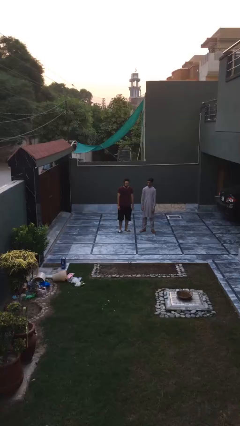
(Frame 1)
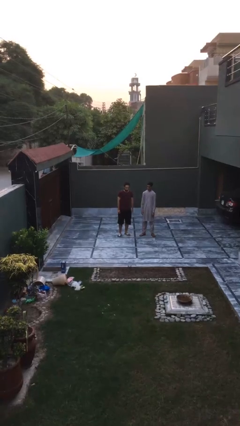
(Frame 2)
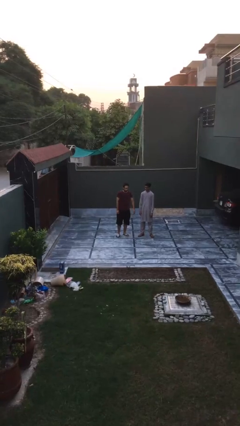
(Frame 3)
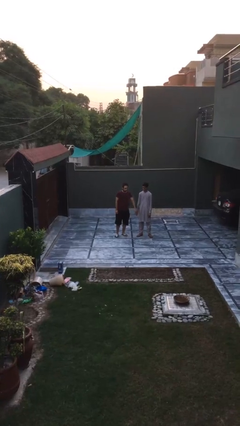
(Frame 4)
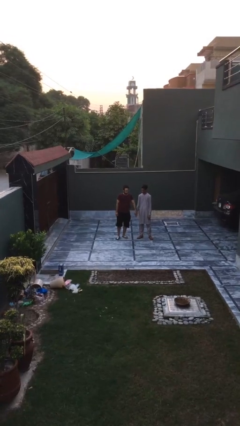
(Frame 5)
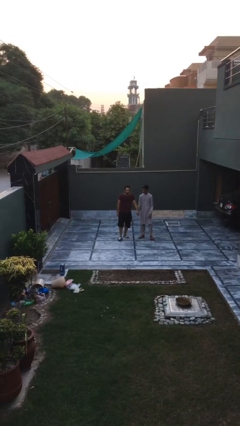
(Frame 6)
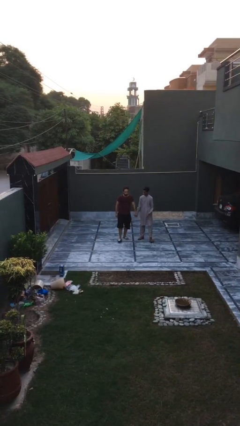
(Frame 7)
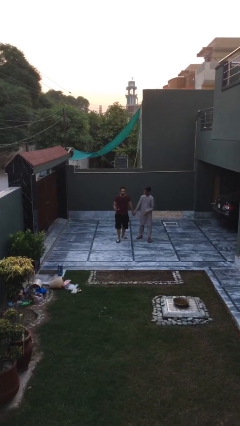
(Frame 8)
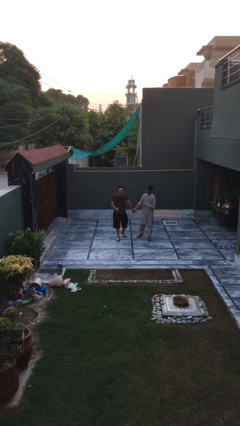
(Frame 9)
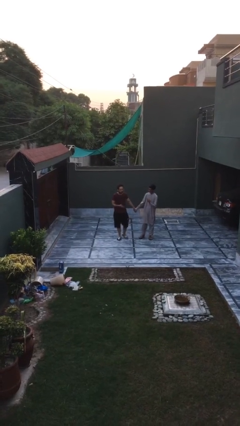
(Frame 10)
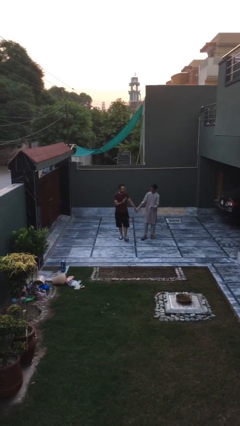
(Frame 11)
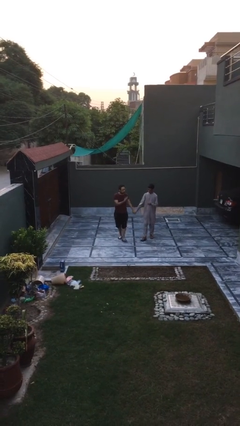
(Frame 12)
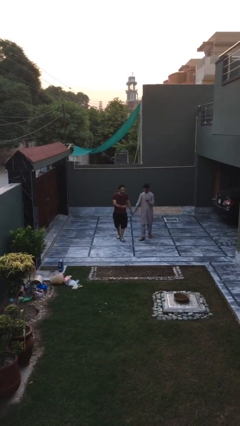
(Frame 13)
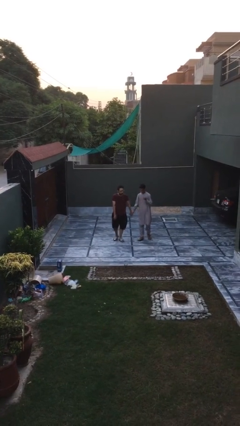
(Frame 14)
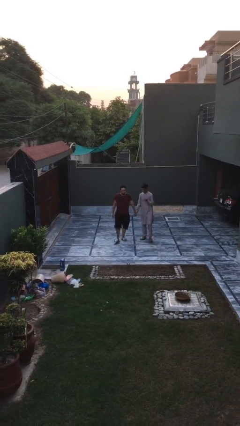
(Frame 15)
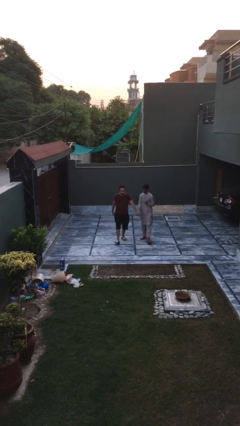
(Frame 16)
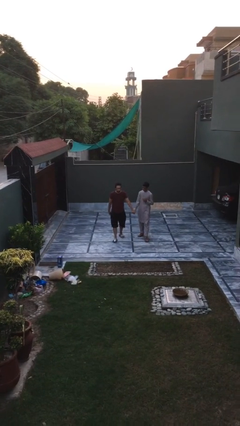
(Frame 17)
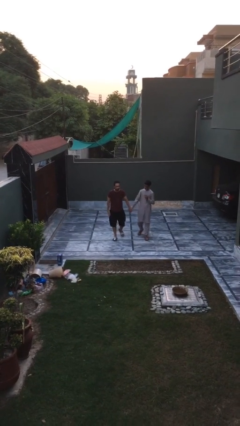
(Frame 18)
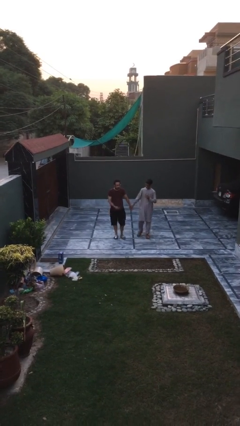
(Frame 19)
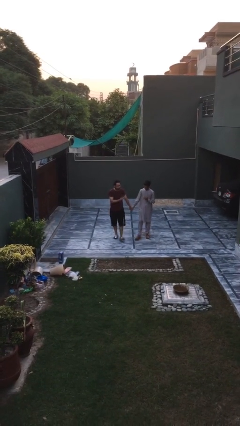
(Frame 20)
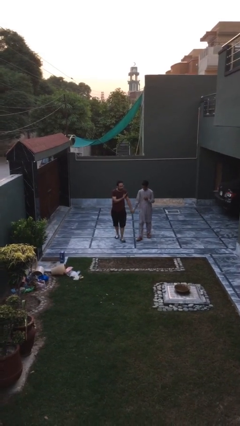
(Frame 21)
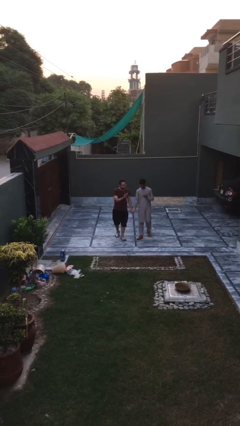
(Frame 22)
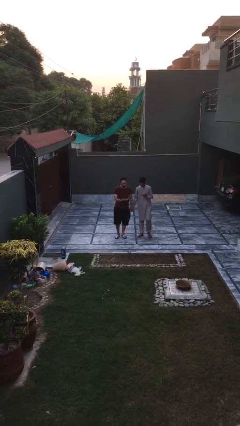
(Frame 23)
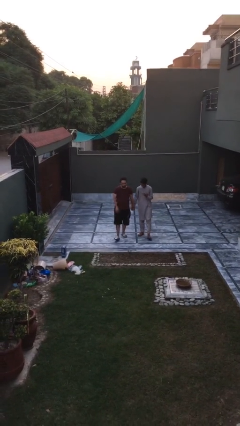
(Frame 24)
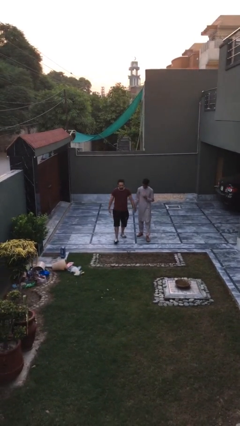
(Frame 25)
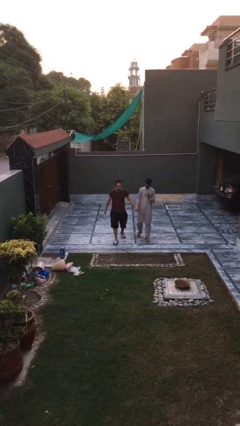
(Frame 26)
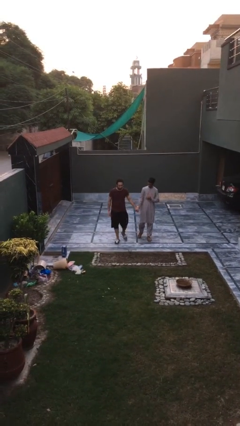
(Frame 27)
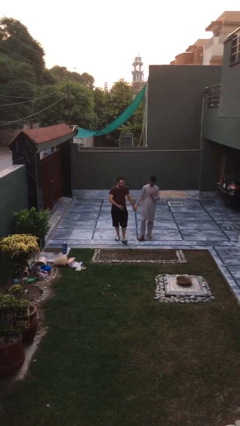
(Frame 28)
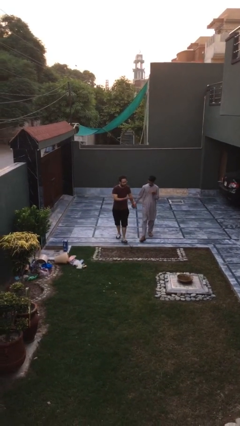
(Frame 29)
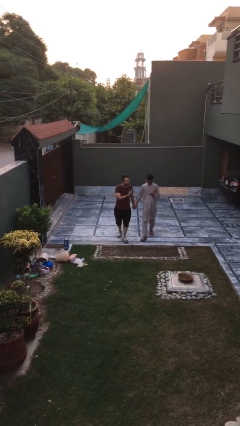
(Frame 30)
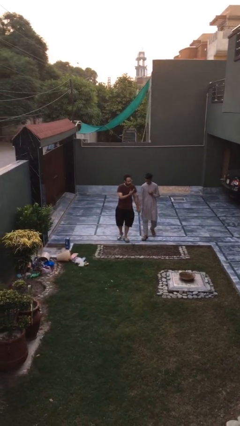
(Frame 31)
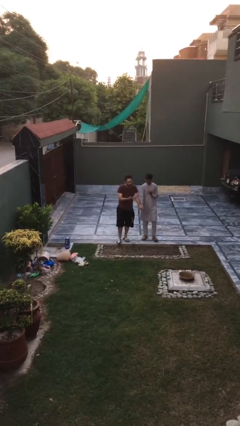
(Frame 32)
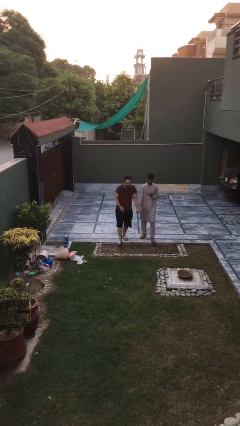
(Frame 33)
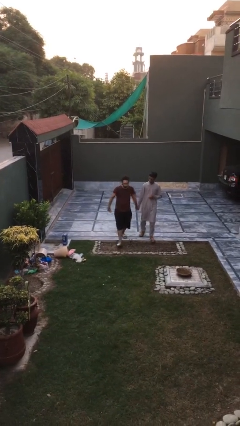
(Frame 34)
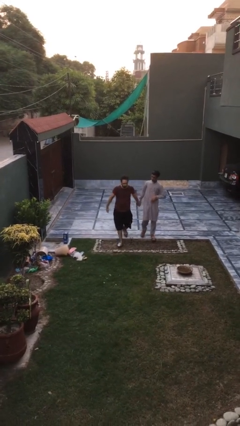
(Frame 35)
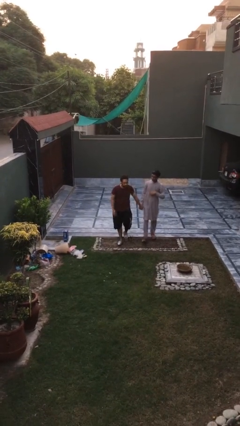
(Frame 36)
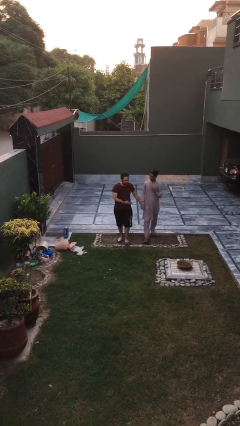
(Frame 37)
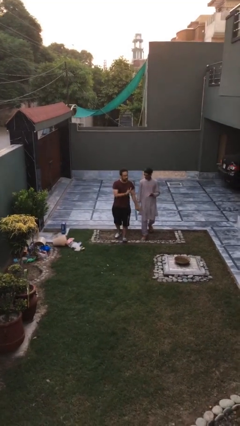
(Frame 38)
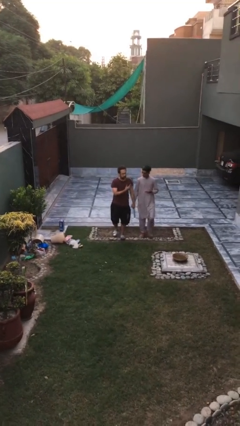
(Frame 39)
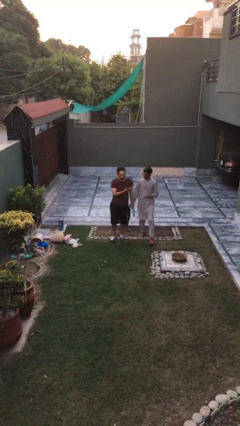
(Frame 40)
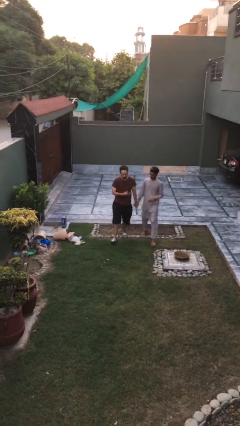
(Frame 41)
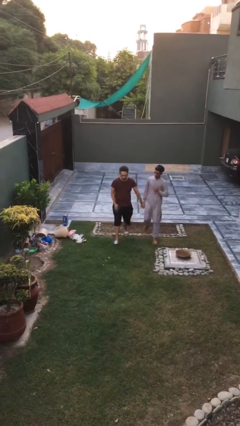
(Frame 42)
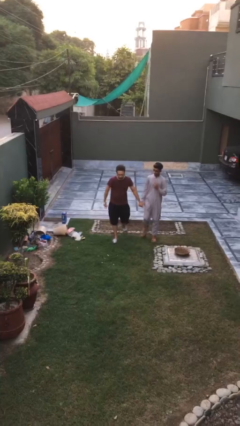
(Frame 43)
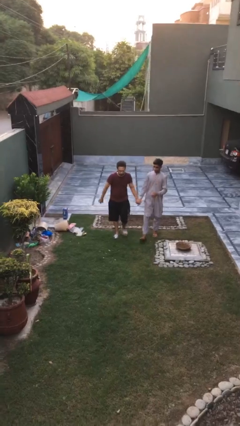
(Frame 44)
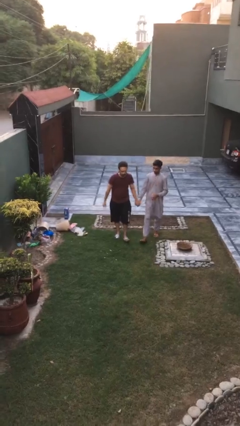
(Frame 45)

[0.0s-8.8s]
person holds hand

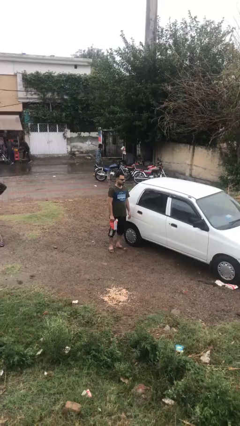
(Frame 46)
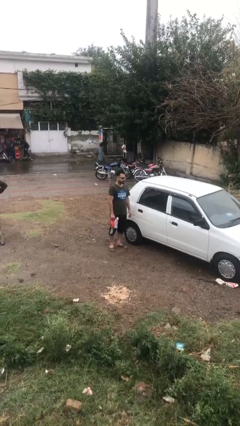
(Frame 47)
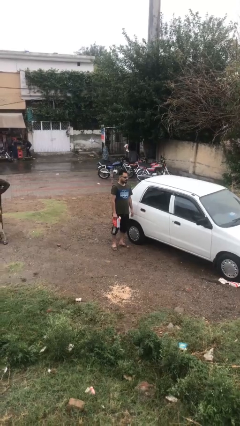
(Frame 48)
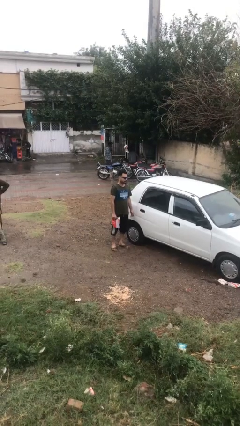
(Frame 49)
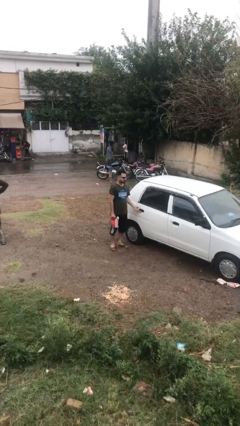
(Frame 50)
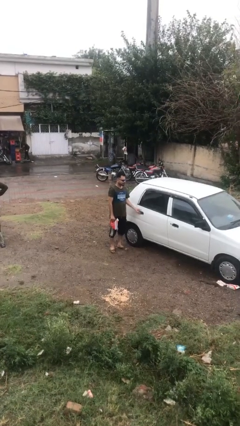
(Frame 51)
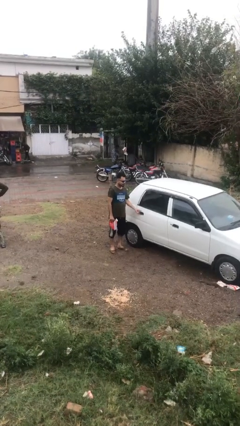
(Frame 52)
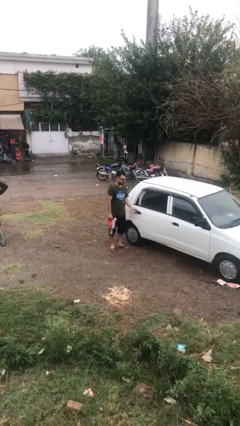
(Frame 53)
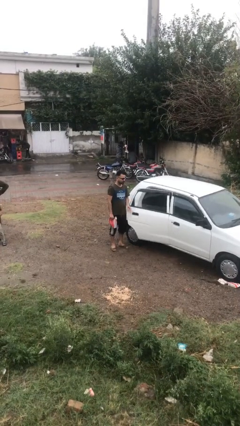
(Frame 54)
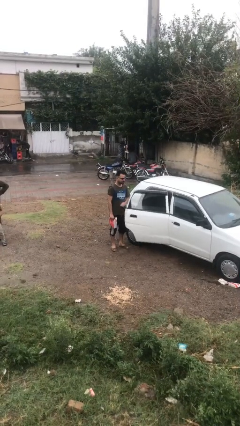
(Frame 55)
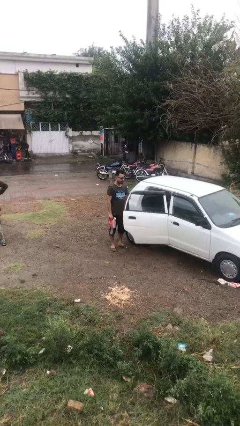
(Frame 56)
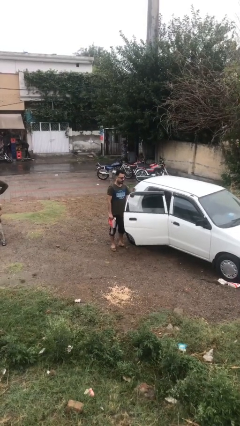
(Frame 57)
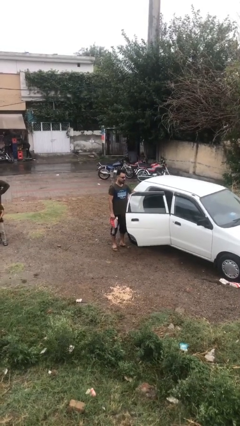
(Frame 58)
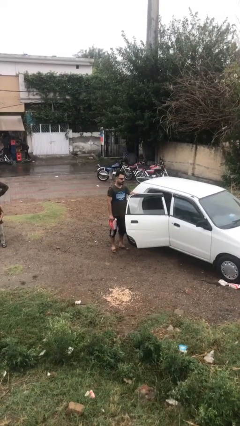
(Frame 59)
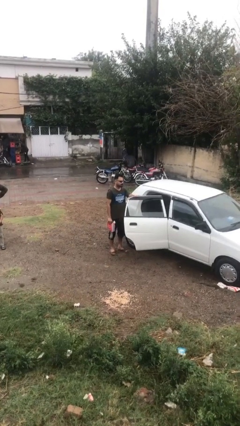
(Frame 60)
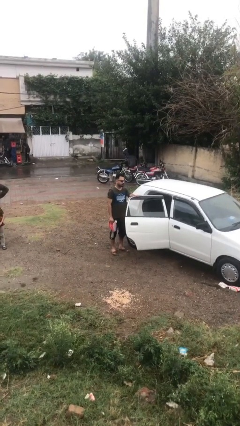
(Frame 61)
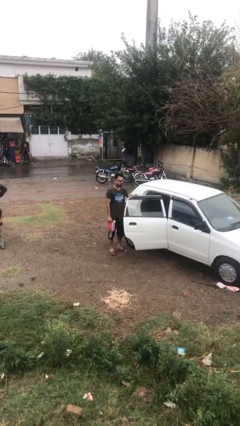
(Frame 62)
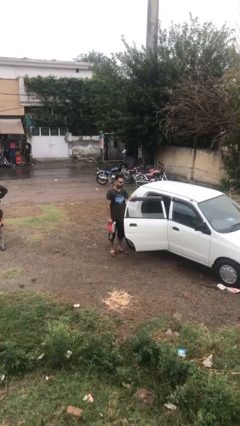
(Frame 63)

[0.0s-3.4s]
person opens car door

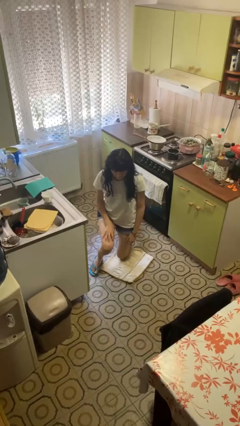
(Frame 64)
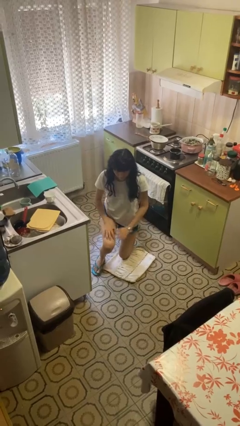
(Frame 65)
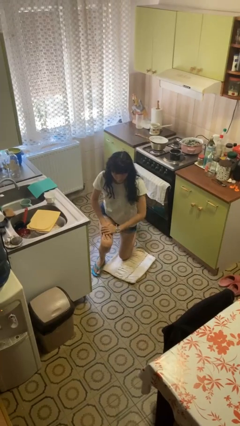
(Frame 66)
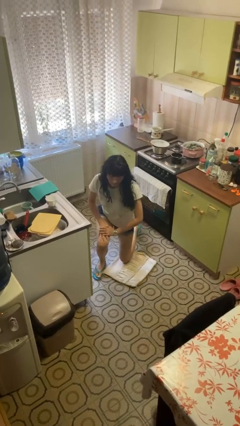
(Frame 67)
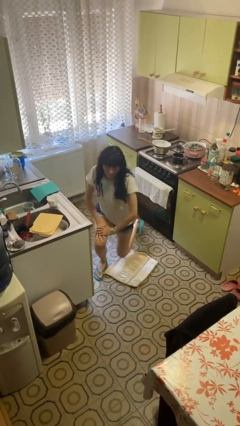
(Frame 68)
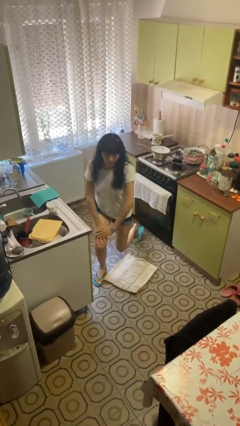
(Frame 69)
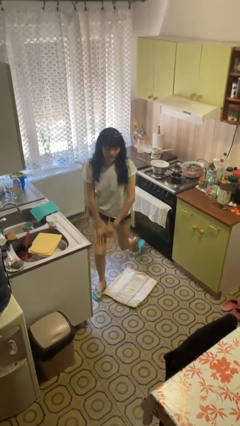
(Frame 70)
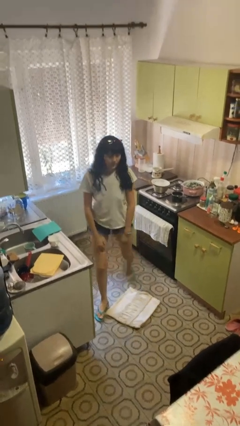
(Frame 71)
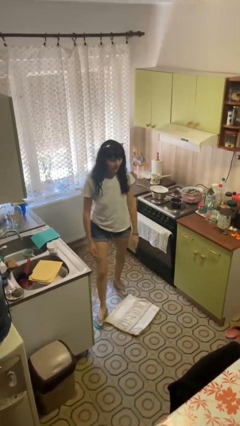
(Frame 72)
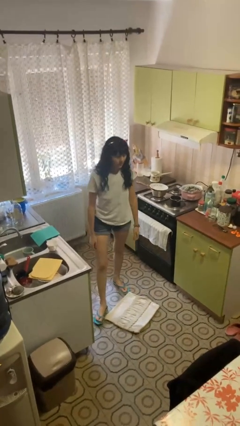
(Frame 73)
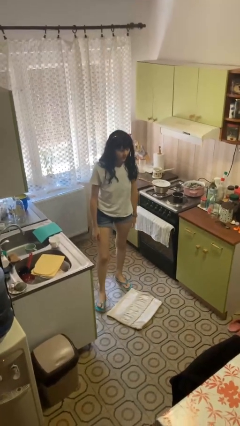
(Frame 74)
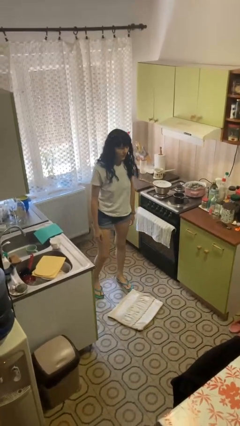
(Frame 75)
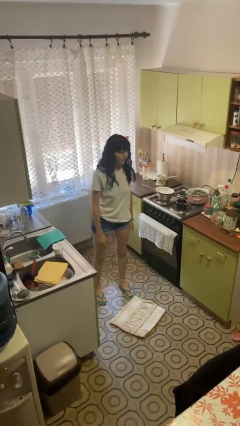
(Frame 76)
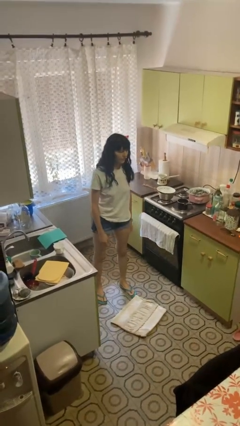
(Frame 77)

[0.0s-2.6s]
person stands up from floor

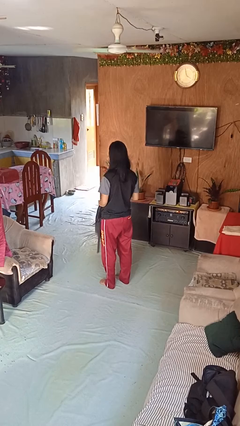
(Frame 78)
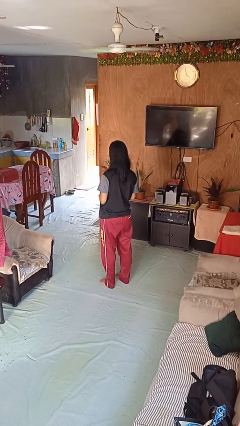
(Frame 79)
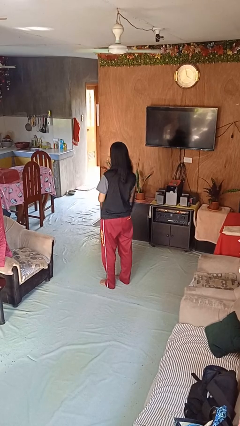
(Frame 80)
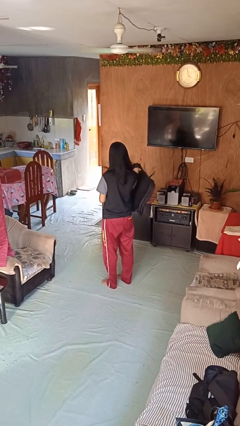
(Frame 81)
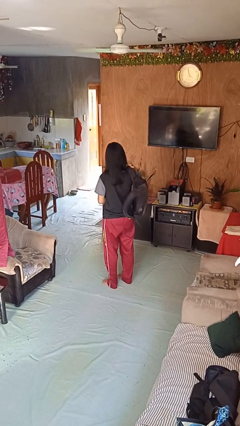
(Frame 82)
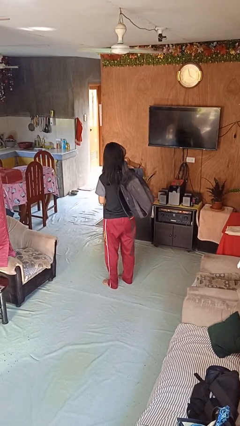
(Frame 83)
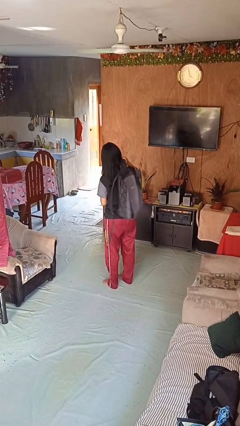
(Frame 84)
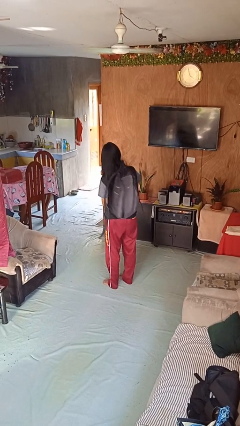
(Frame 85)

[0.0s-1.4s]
person puts on backpack

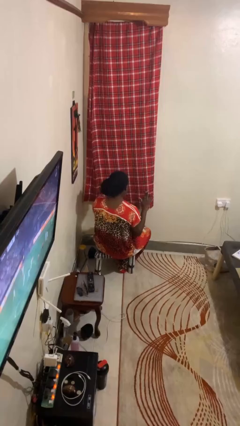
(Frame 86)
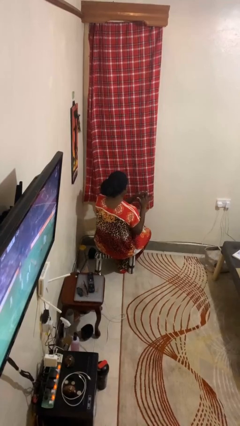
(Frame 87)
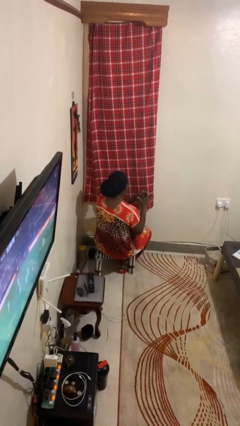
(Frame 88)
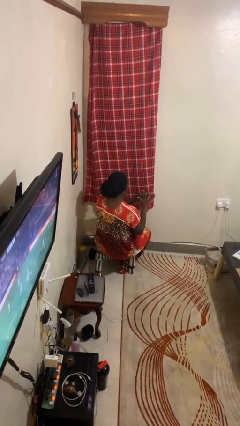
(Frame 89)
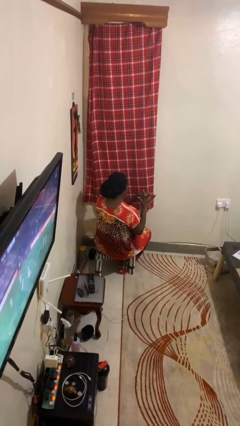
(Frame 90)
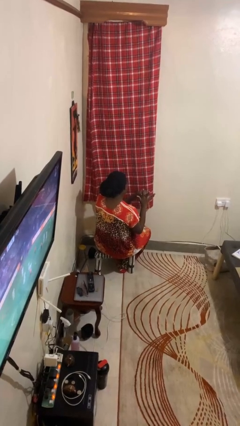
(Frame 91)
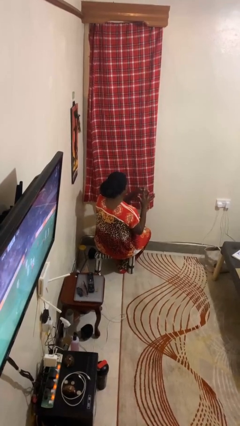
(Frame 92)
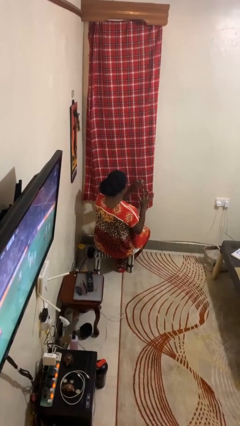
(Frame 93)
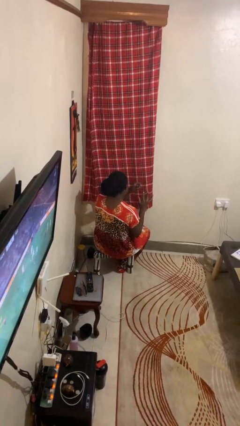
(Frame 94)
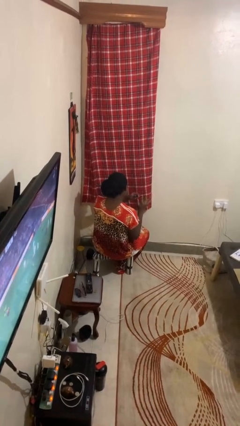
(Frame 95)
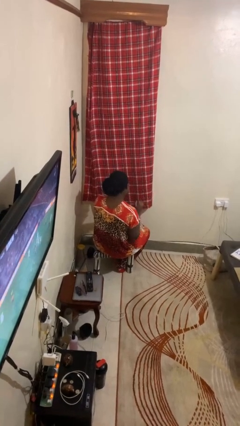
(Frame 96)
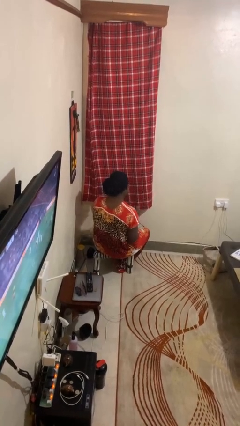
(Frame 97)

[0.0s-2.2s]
person takes off ring
